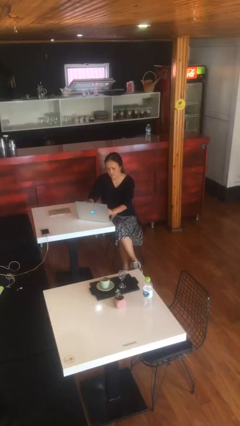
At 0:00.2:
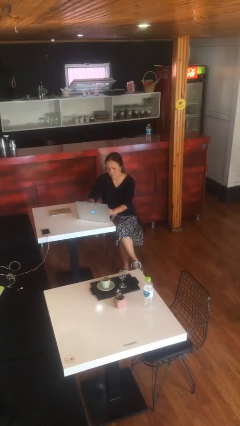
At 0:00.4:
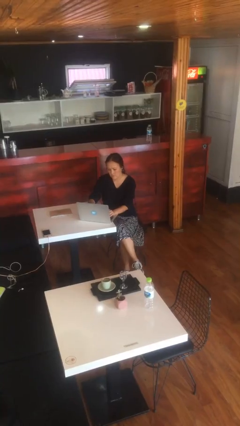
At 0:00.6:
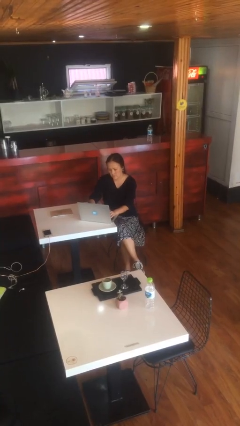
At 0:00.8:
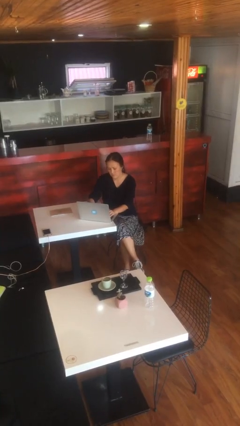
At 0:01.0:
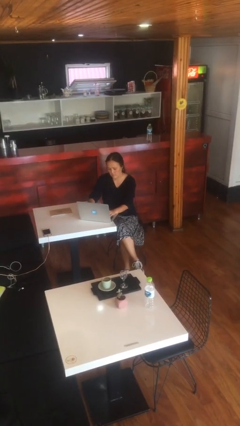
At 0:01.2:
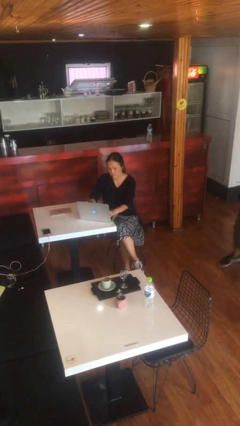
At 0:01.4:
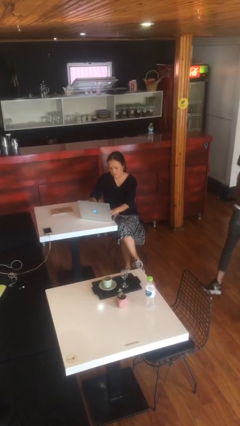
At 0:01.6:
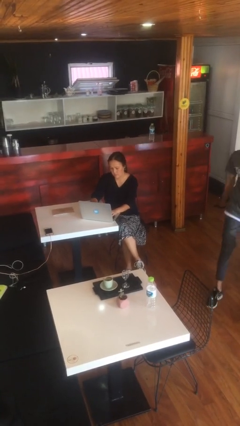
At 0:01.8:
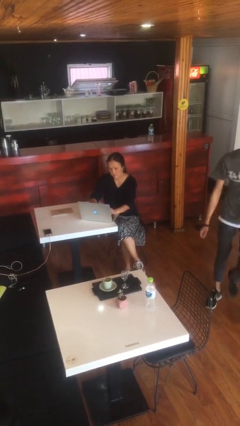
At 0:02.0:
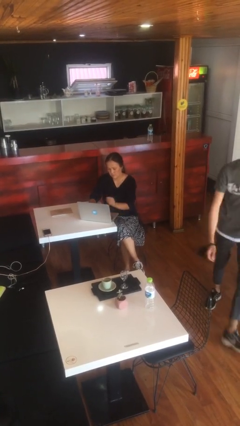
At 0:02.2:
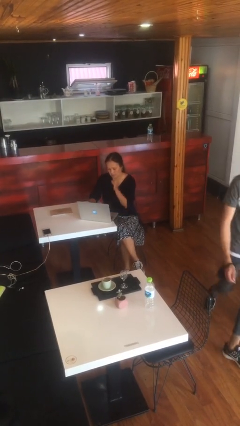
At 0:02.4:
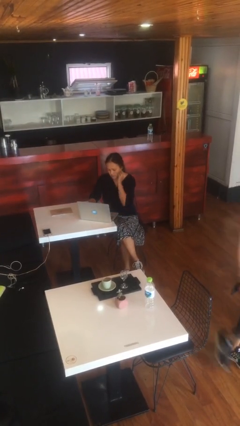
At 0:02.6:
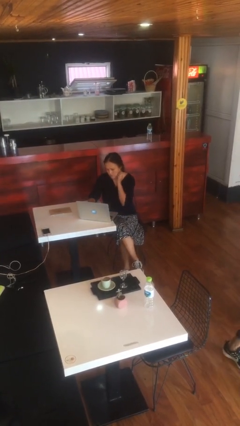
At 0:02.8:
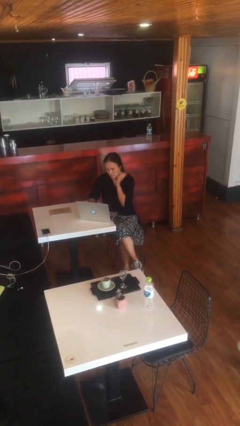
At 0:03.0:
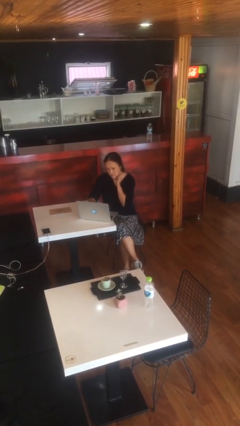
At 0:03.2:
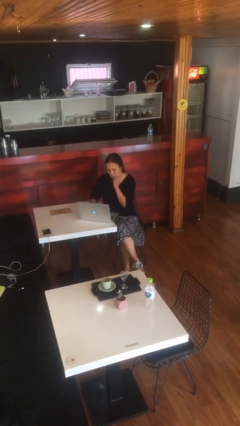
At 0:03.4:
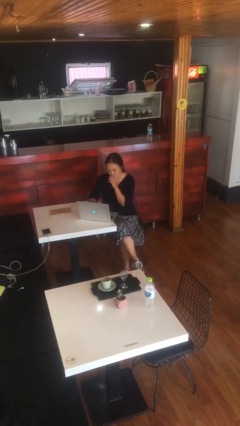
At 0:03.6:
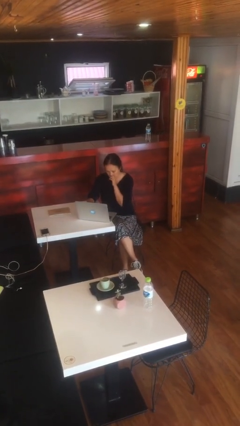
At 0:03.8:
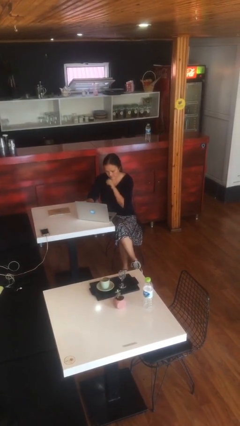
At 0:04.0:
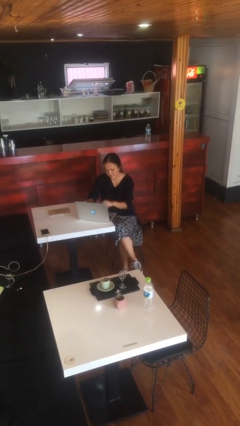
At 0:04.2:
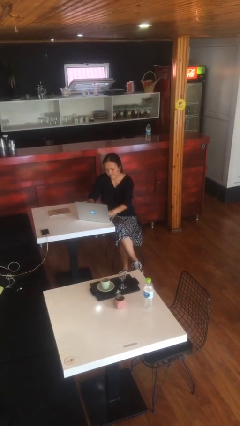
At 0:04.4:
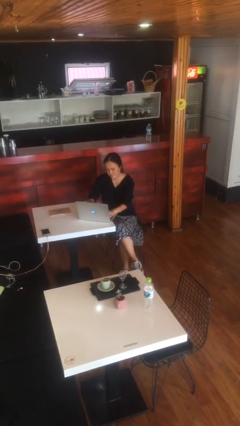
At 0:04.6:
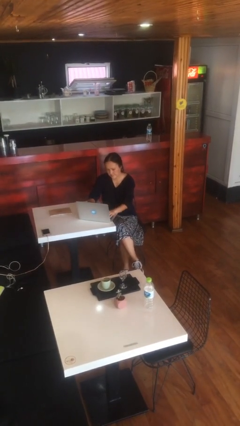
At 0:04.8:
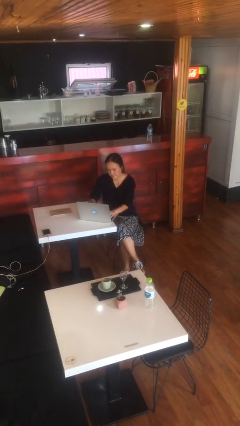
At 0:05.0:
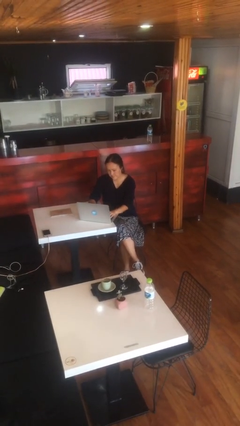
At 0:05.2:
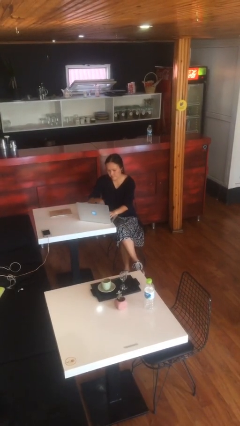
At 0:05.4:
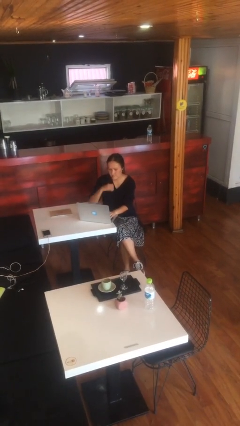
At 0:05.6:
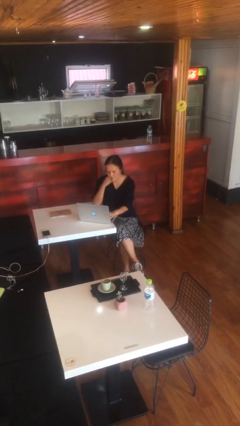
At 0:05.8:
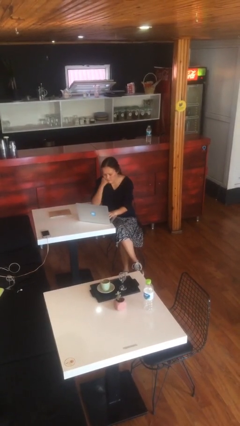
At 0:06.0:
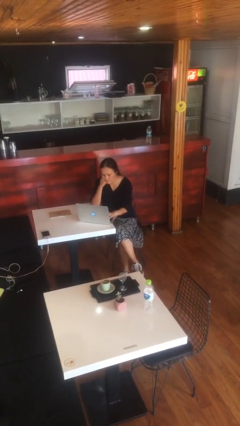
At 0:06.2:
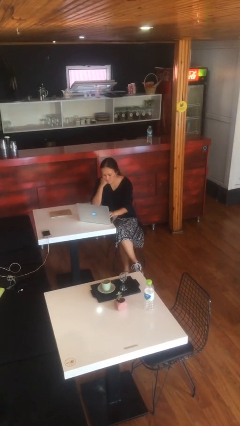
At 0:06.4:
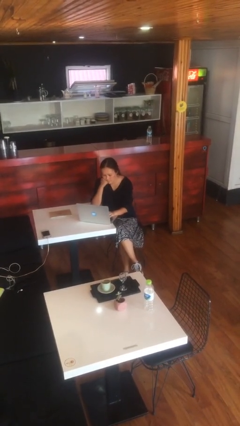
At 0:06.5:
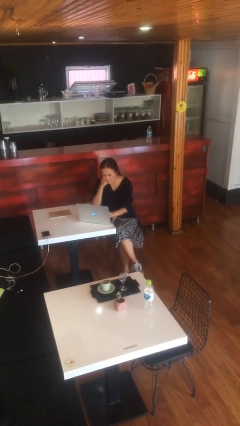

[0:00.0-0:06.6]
person interacts with laptop

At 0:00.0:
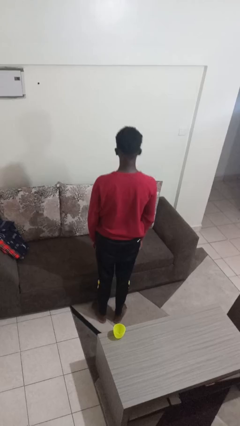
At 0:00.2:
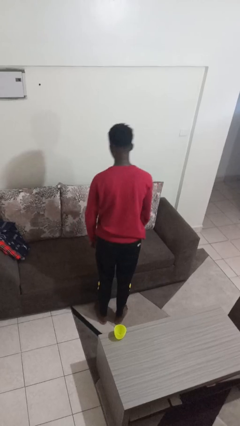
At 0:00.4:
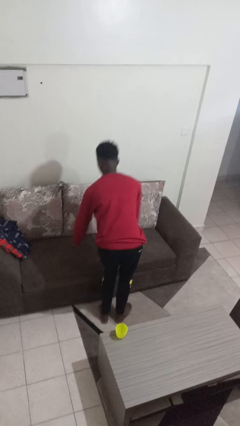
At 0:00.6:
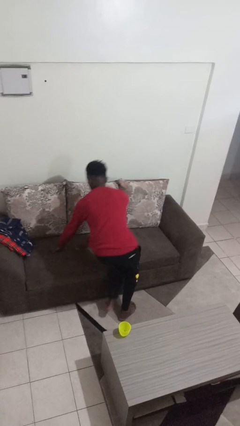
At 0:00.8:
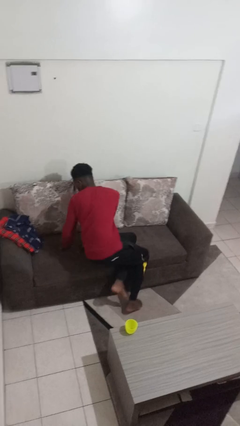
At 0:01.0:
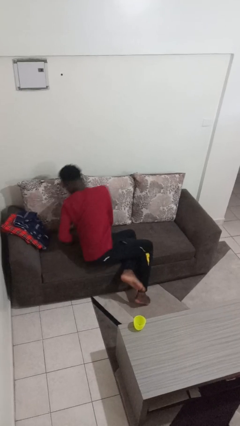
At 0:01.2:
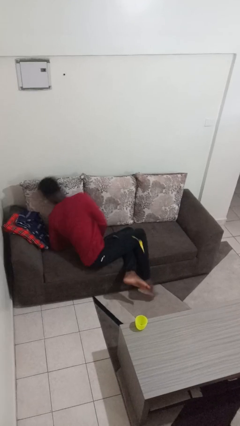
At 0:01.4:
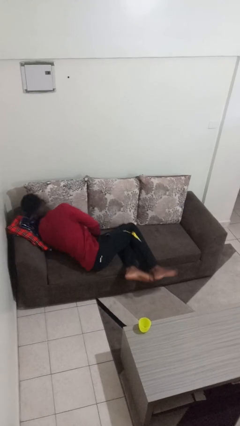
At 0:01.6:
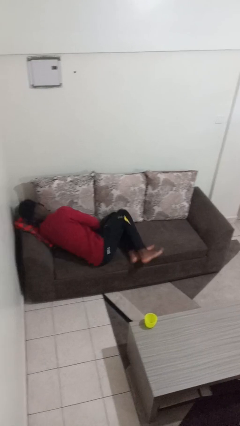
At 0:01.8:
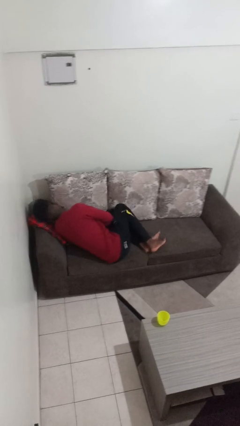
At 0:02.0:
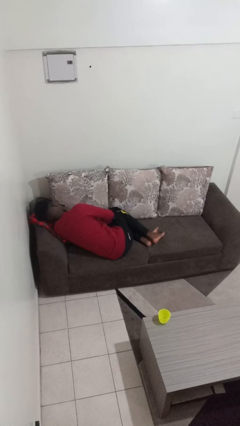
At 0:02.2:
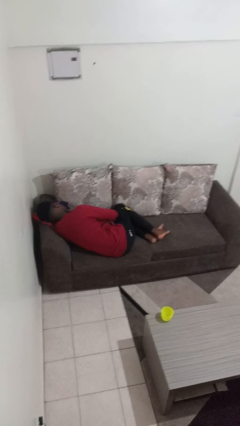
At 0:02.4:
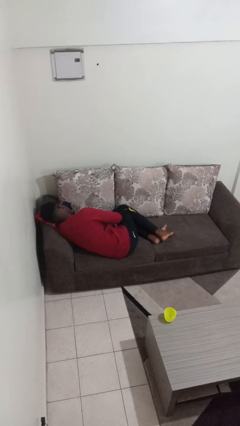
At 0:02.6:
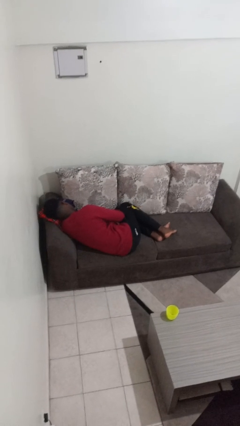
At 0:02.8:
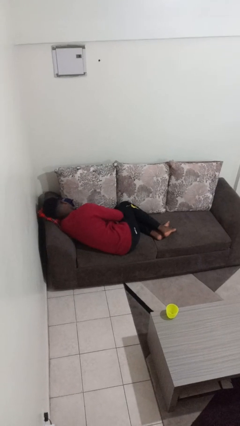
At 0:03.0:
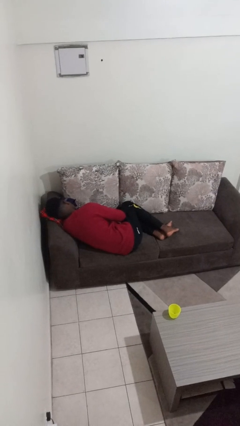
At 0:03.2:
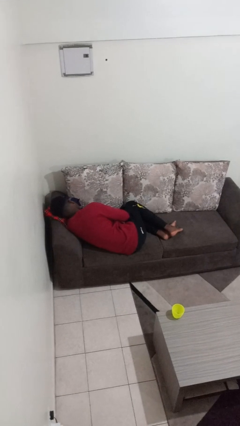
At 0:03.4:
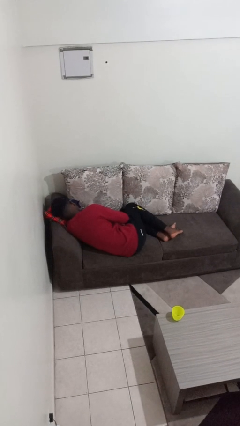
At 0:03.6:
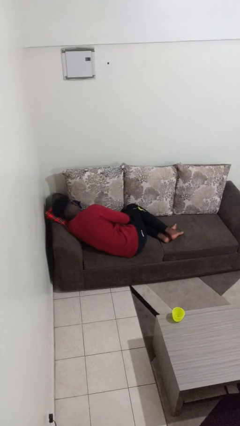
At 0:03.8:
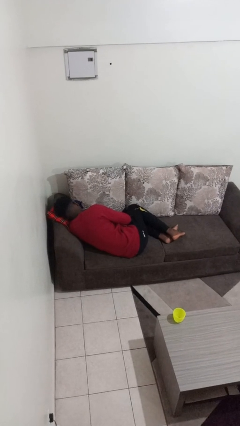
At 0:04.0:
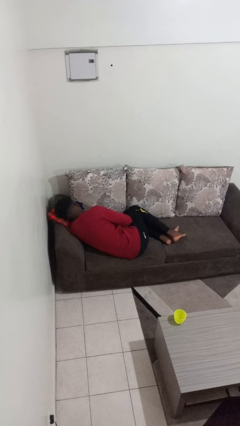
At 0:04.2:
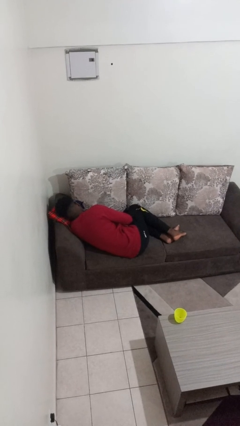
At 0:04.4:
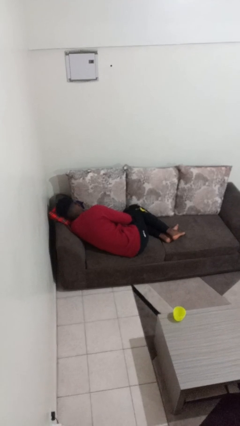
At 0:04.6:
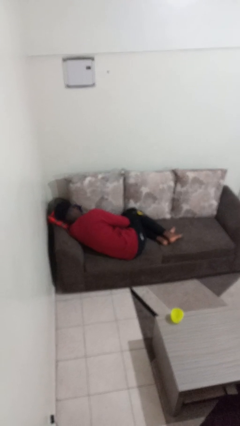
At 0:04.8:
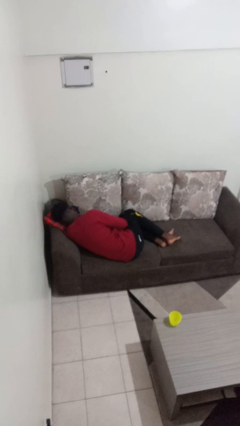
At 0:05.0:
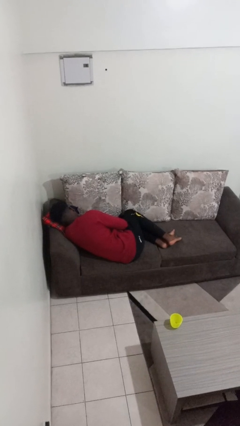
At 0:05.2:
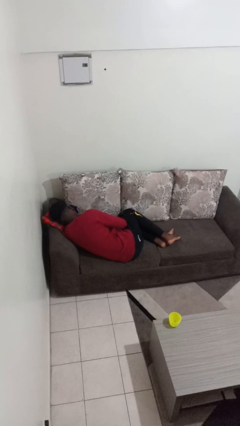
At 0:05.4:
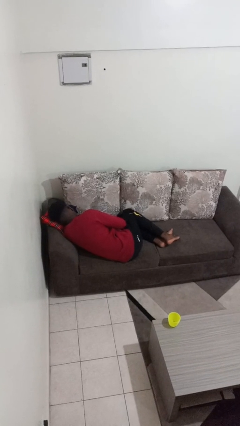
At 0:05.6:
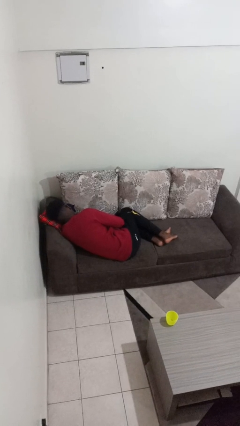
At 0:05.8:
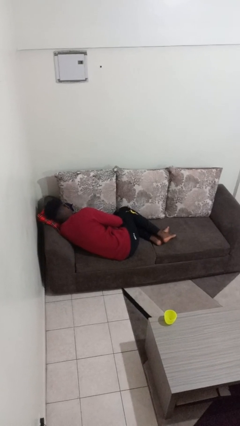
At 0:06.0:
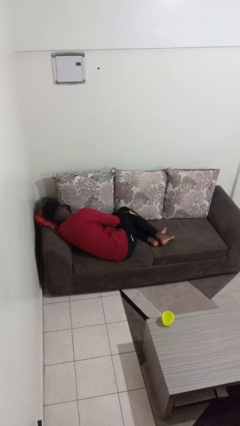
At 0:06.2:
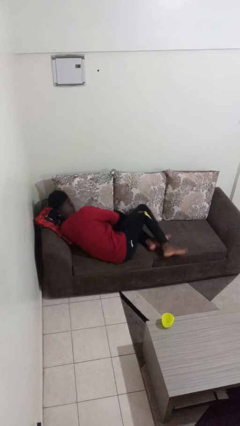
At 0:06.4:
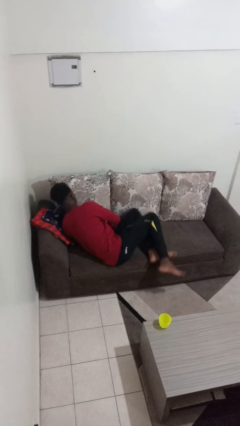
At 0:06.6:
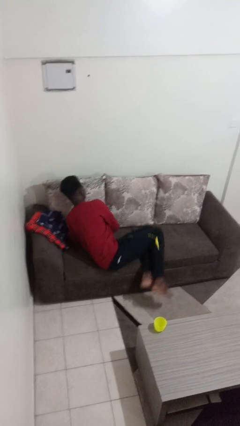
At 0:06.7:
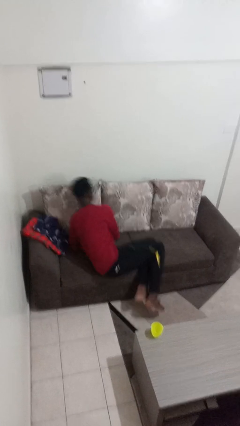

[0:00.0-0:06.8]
person lies down on couch

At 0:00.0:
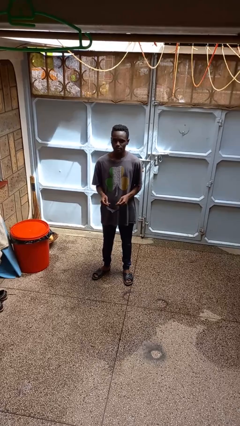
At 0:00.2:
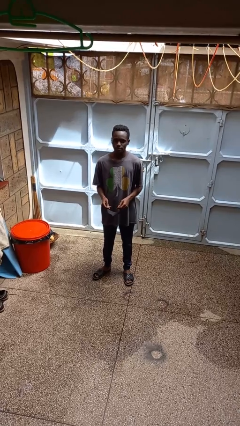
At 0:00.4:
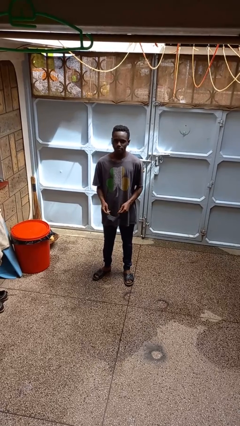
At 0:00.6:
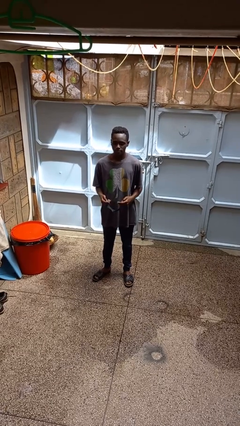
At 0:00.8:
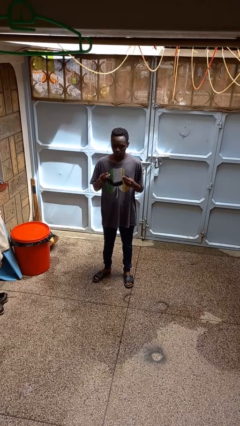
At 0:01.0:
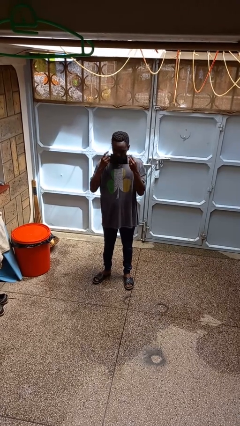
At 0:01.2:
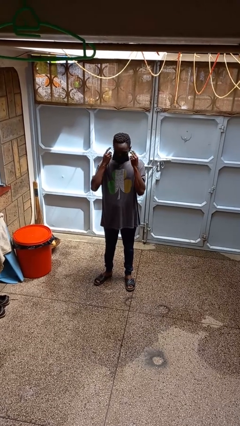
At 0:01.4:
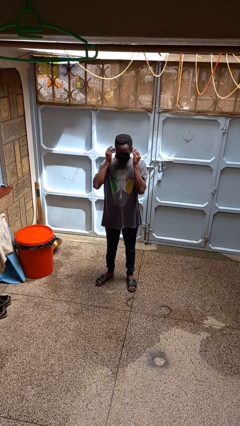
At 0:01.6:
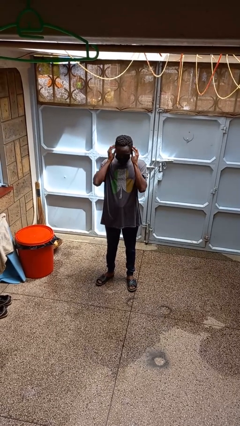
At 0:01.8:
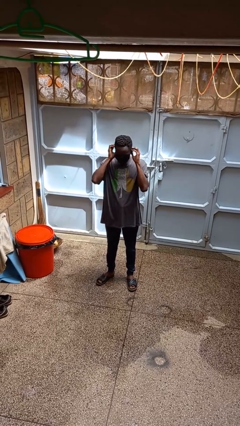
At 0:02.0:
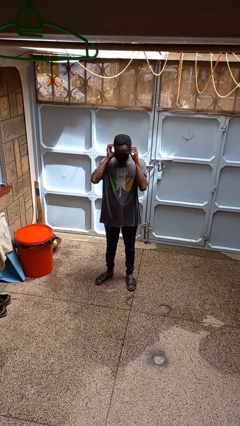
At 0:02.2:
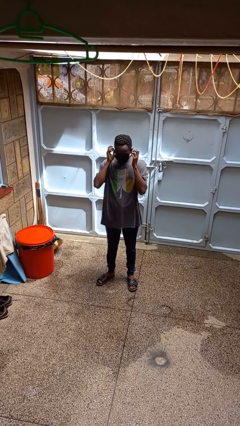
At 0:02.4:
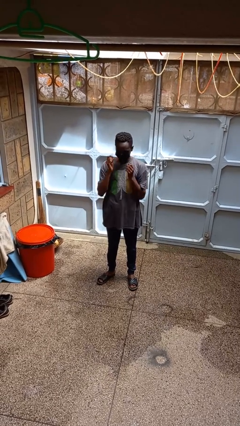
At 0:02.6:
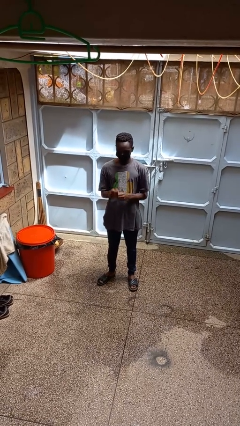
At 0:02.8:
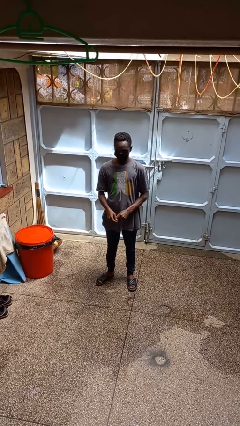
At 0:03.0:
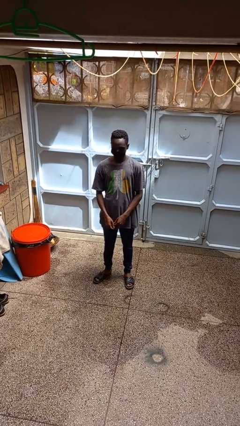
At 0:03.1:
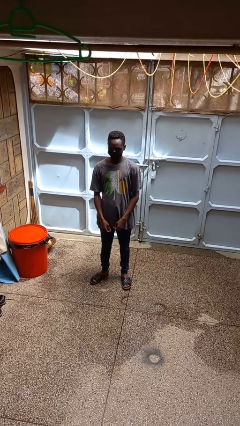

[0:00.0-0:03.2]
person puts on facemask

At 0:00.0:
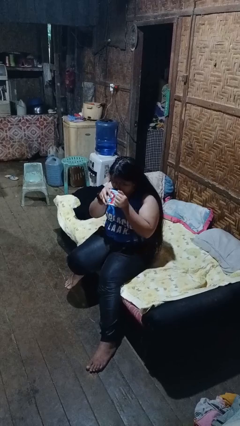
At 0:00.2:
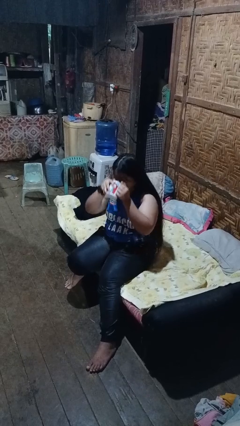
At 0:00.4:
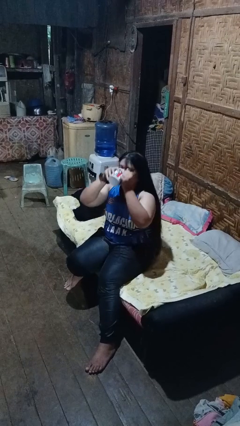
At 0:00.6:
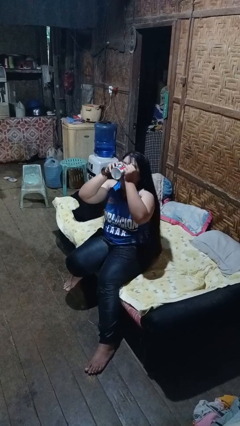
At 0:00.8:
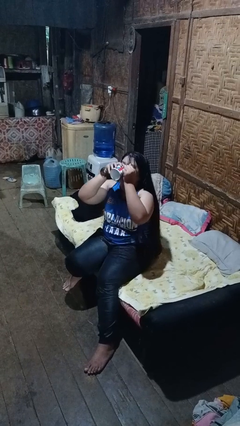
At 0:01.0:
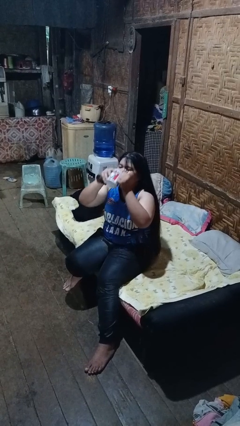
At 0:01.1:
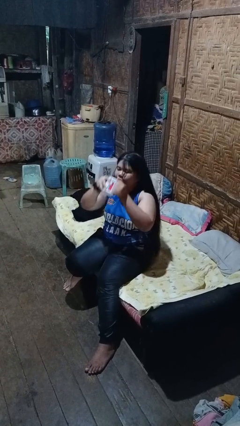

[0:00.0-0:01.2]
person drinks from mug

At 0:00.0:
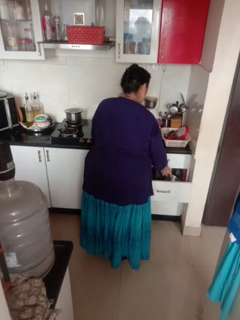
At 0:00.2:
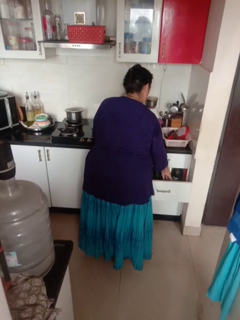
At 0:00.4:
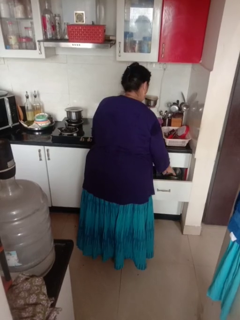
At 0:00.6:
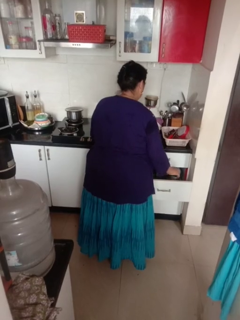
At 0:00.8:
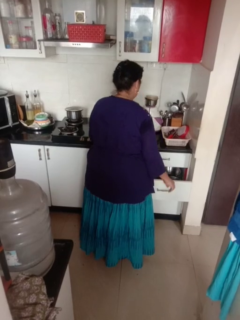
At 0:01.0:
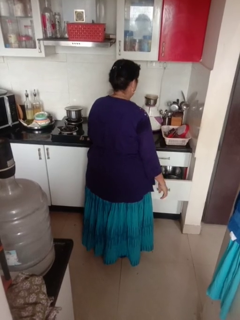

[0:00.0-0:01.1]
person puts object into kitchen drawer
